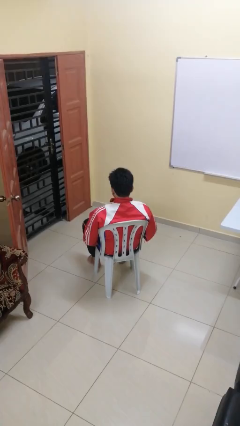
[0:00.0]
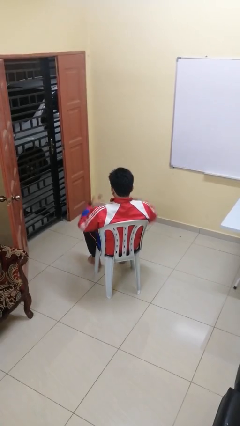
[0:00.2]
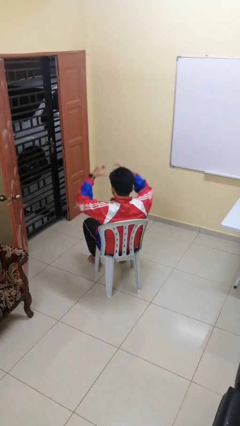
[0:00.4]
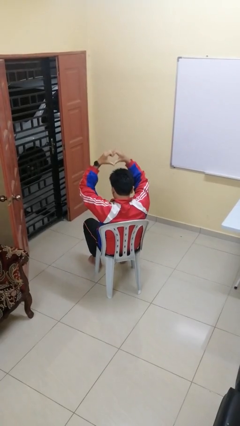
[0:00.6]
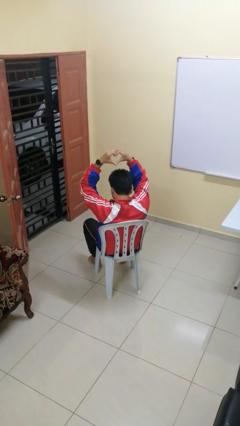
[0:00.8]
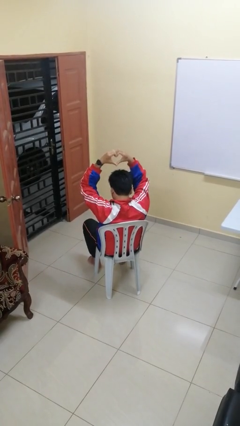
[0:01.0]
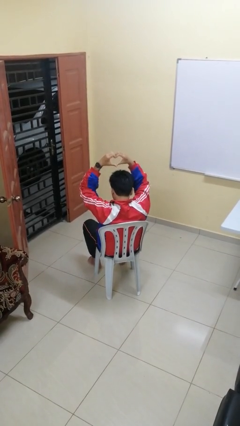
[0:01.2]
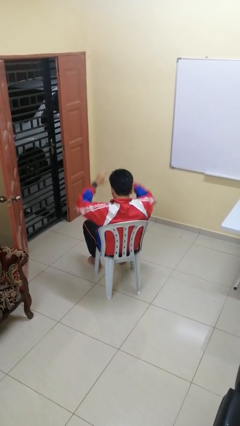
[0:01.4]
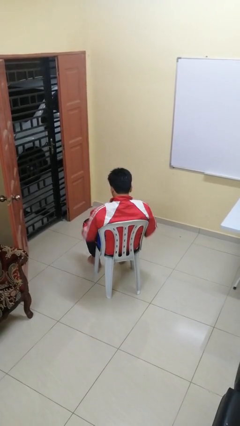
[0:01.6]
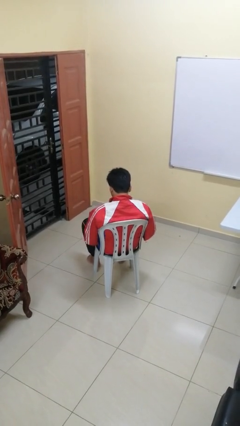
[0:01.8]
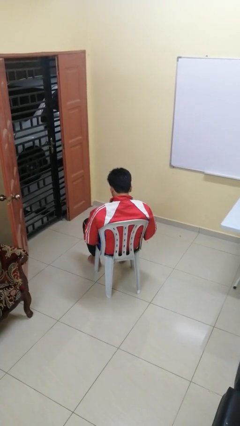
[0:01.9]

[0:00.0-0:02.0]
person gestures heart

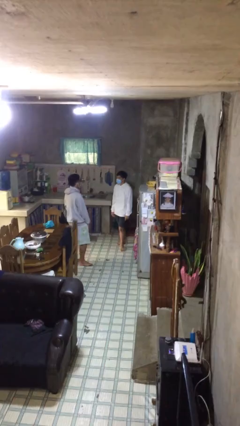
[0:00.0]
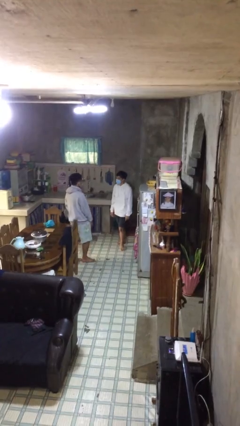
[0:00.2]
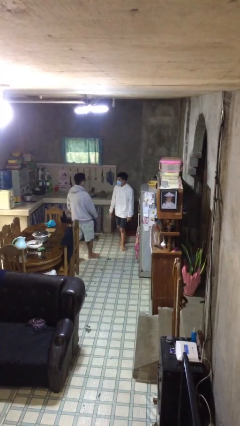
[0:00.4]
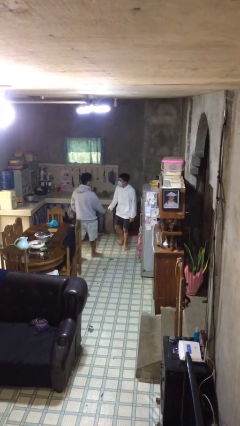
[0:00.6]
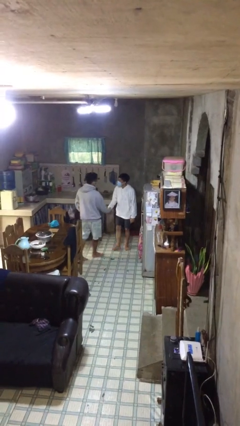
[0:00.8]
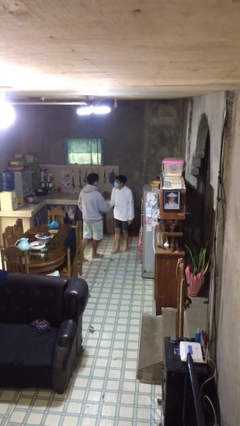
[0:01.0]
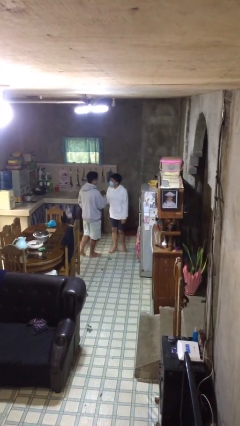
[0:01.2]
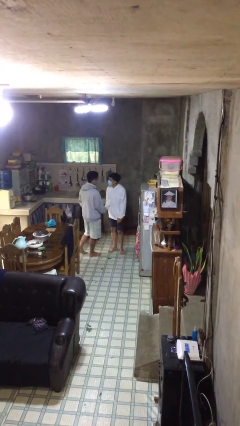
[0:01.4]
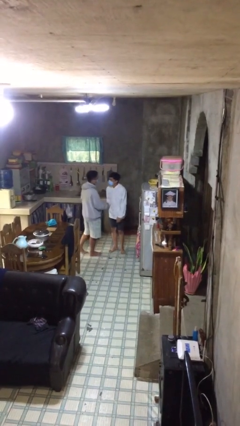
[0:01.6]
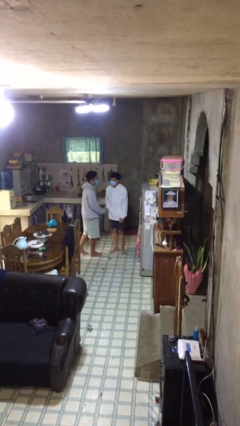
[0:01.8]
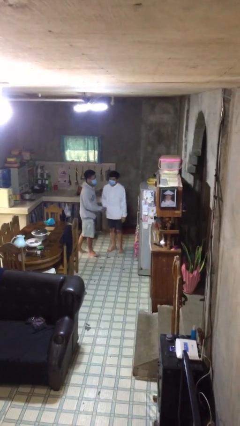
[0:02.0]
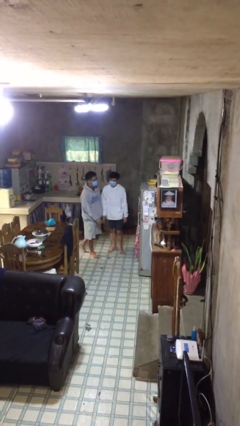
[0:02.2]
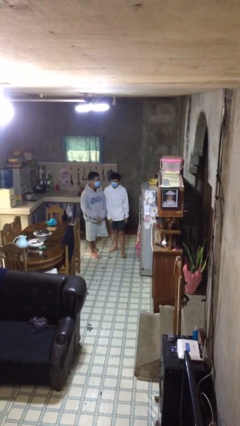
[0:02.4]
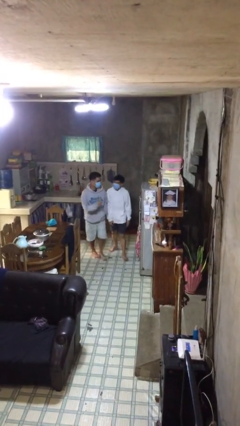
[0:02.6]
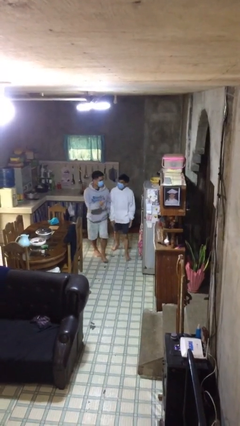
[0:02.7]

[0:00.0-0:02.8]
person shakes hand

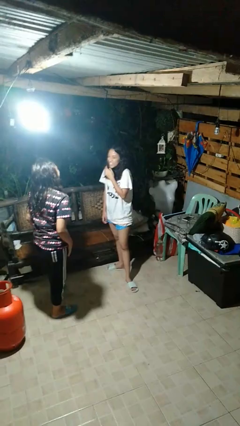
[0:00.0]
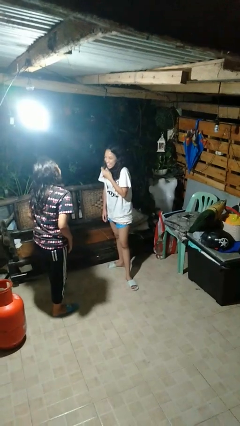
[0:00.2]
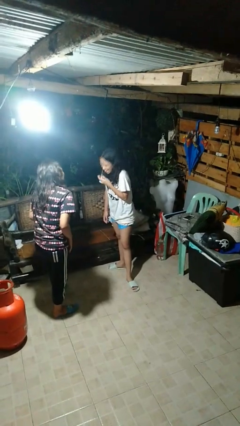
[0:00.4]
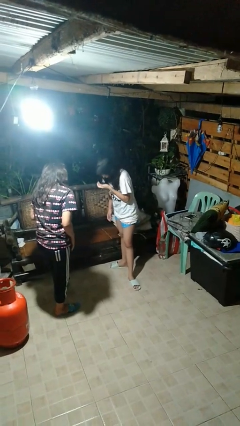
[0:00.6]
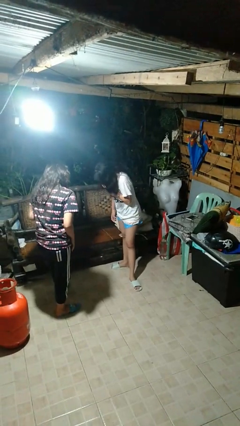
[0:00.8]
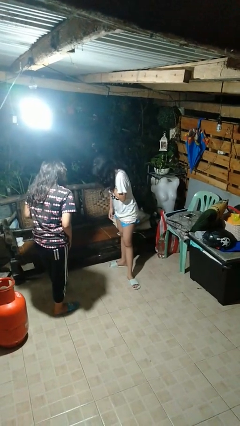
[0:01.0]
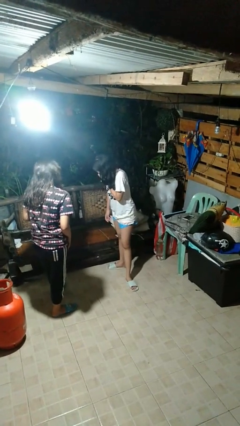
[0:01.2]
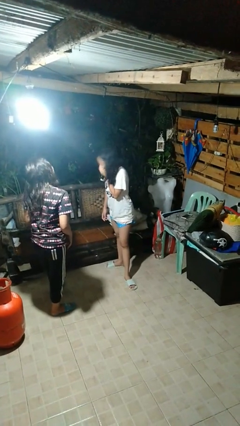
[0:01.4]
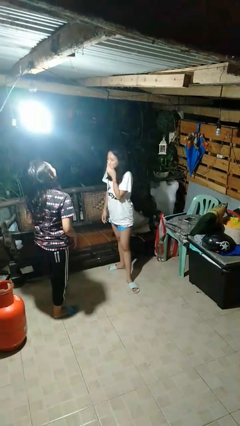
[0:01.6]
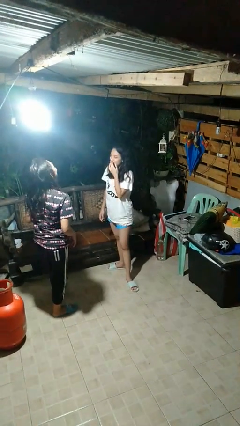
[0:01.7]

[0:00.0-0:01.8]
person laughs with person

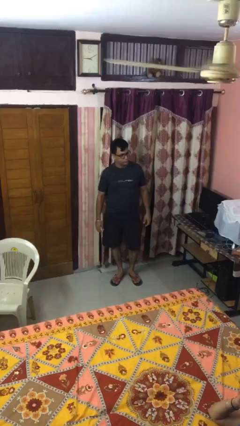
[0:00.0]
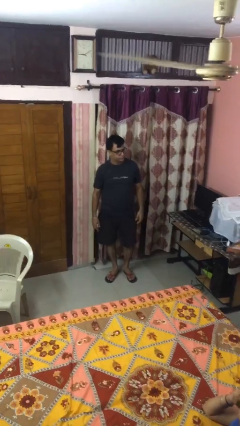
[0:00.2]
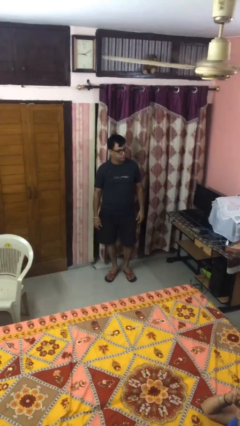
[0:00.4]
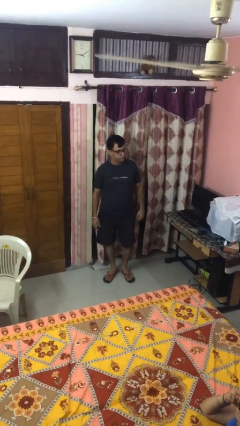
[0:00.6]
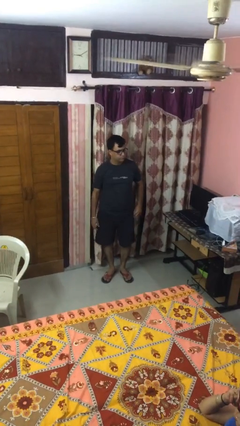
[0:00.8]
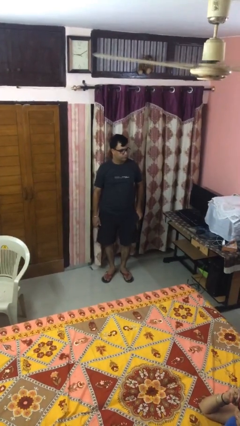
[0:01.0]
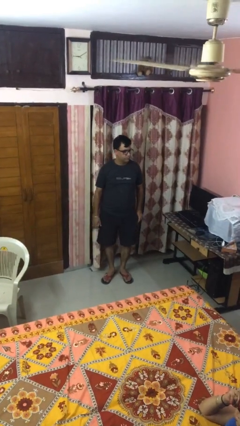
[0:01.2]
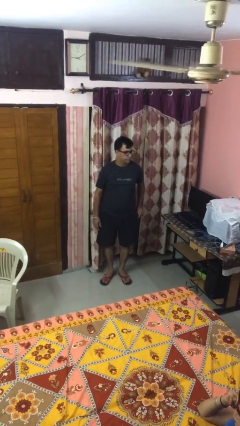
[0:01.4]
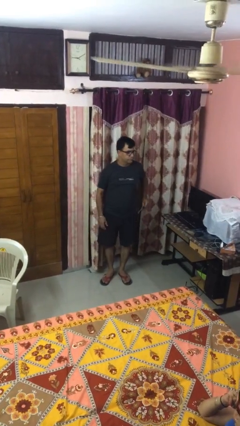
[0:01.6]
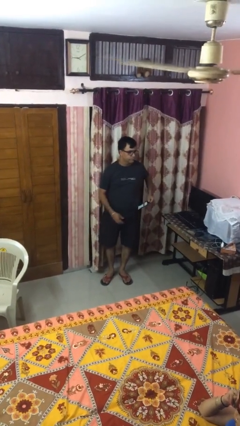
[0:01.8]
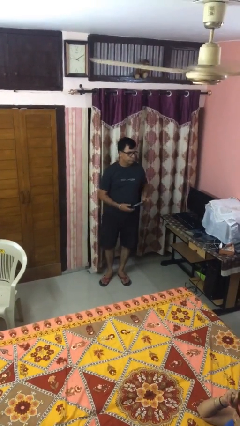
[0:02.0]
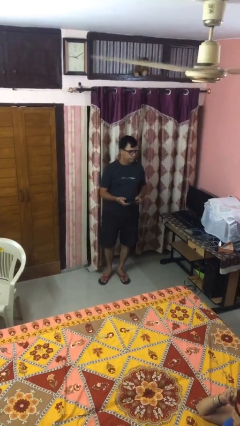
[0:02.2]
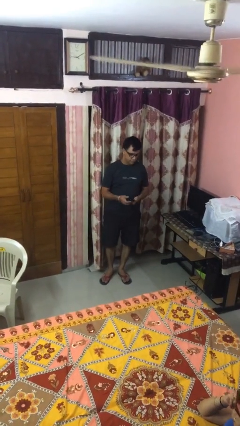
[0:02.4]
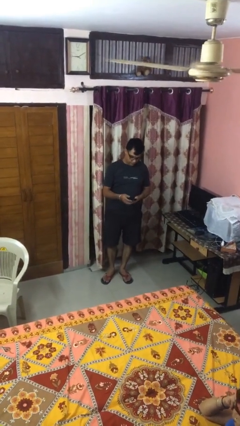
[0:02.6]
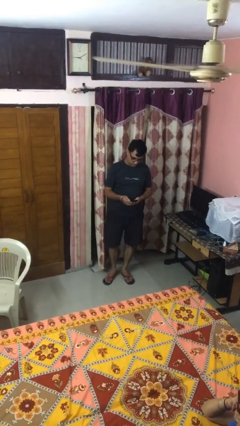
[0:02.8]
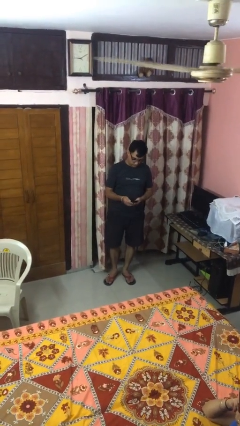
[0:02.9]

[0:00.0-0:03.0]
person takes phone from pocket

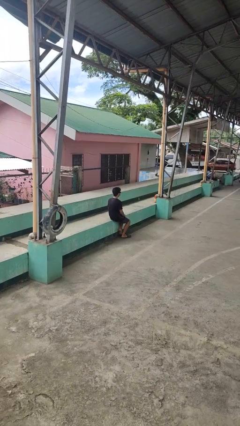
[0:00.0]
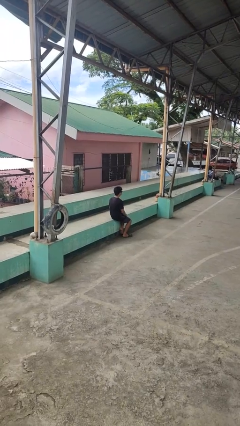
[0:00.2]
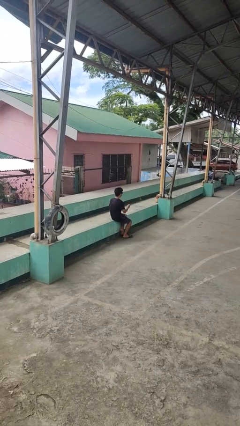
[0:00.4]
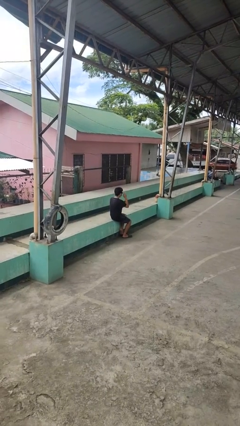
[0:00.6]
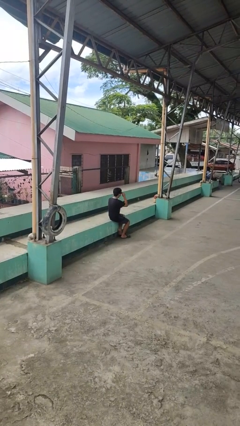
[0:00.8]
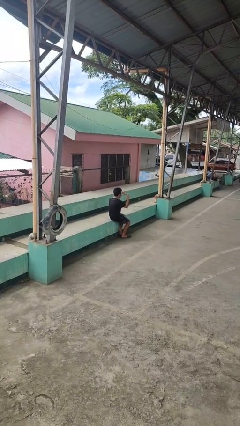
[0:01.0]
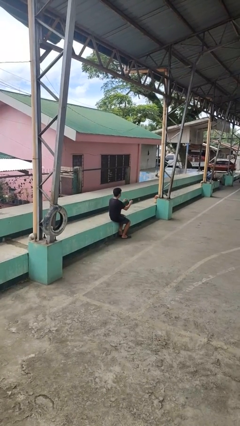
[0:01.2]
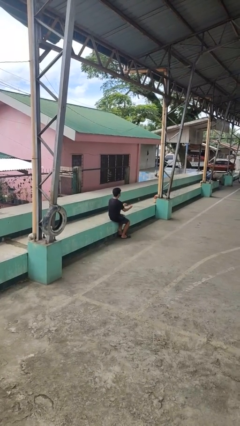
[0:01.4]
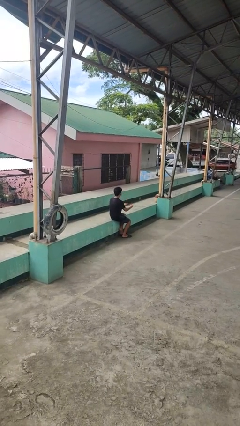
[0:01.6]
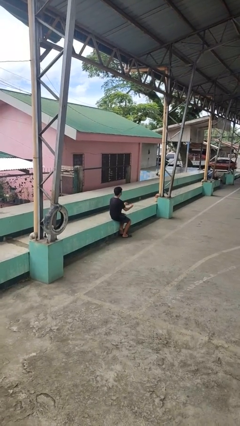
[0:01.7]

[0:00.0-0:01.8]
person takes off sunglasses

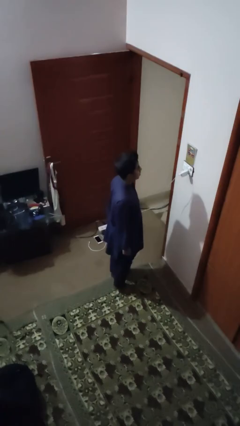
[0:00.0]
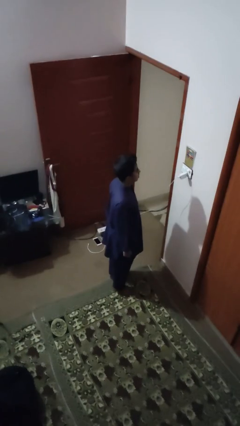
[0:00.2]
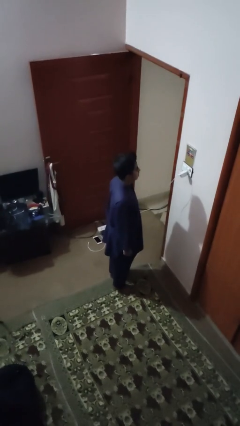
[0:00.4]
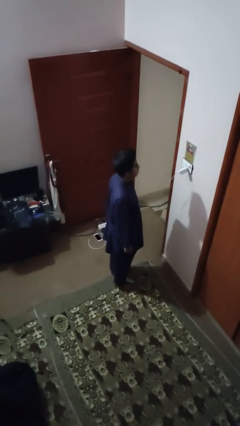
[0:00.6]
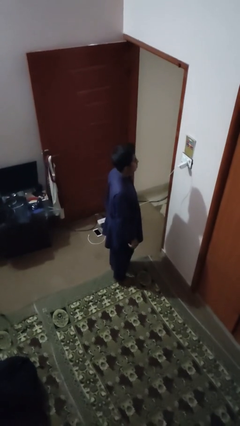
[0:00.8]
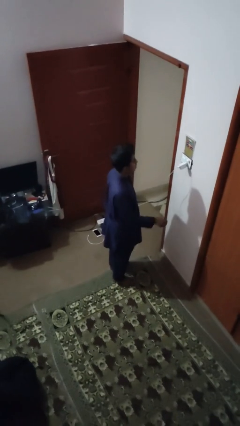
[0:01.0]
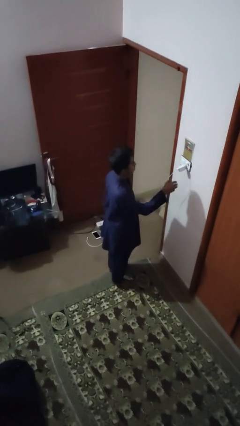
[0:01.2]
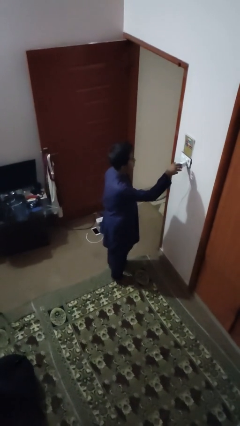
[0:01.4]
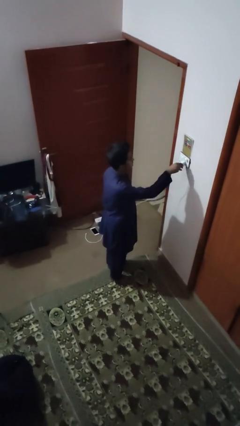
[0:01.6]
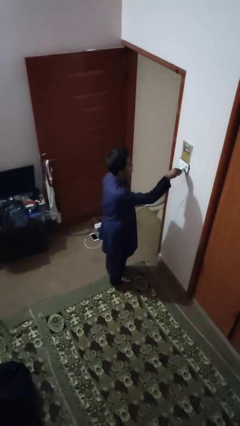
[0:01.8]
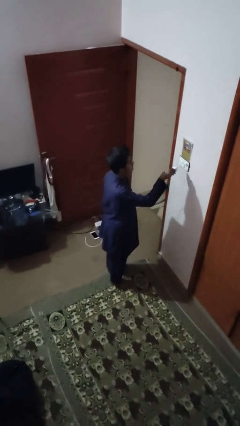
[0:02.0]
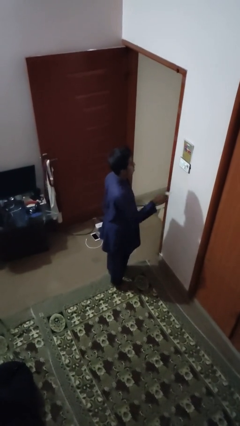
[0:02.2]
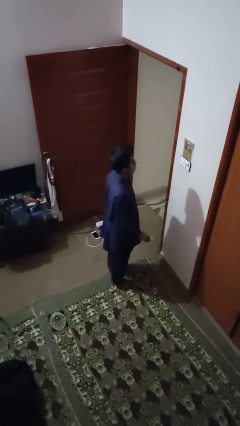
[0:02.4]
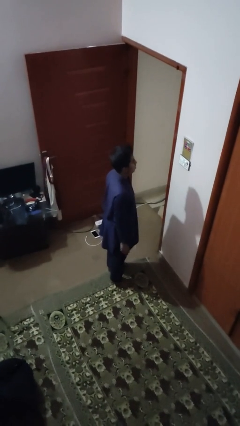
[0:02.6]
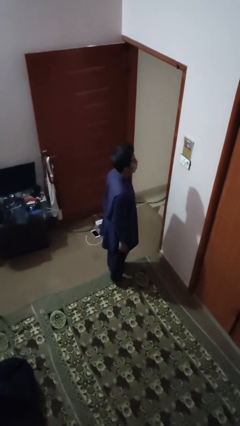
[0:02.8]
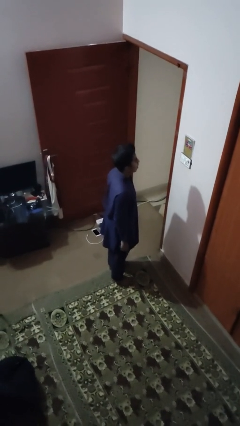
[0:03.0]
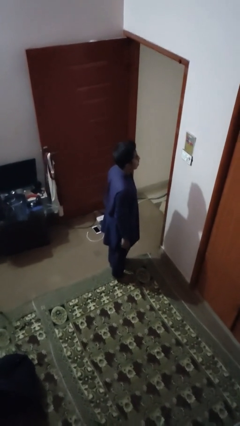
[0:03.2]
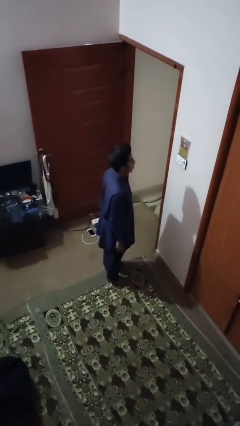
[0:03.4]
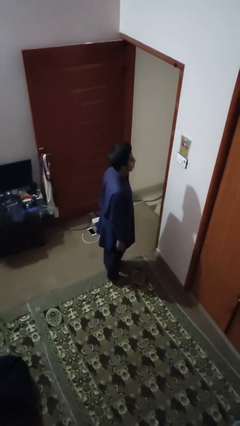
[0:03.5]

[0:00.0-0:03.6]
person unplugs from electrical socket

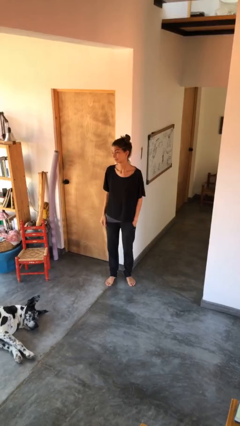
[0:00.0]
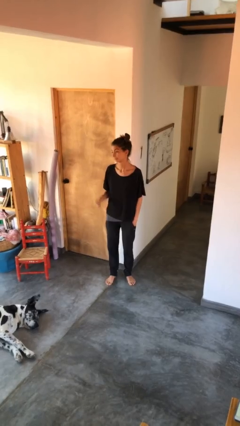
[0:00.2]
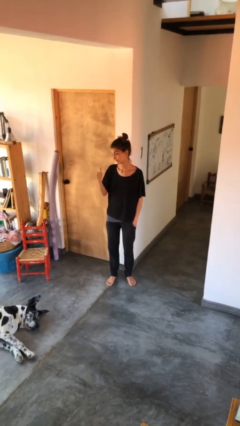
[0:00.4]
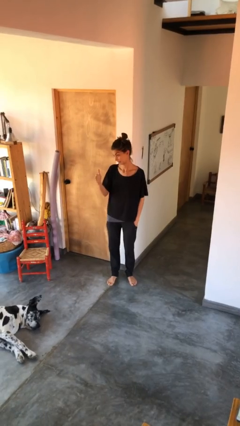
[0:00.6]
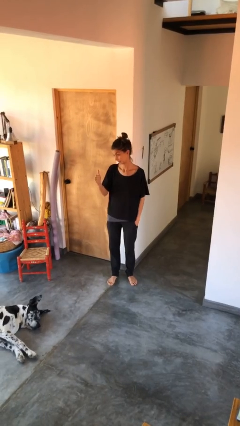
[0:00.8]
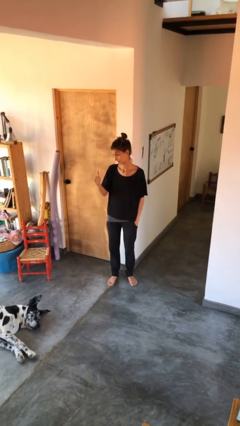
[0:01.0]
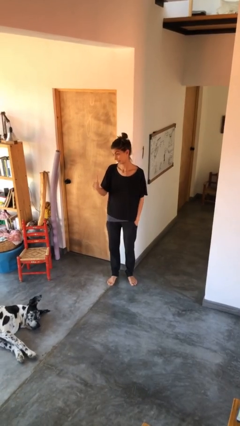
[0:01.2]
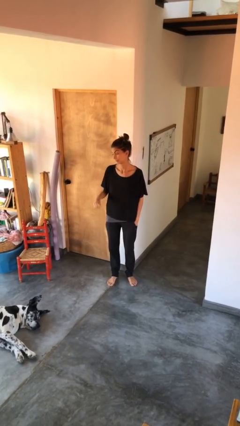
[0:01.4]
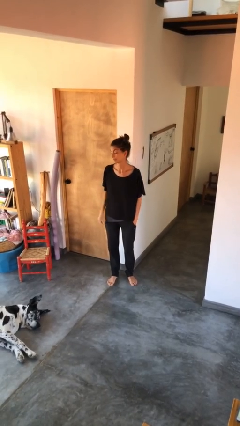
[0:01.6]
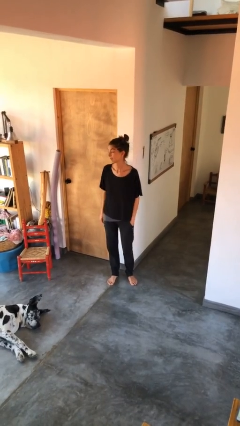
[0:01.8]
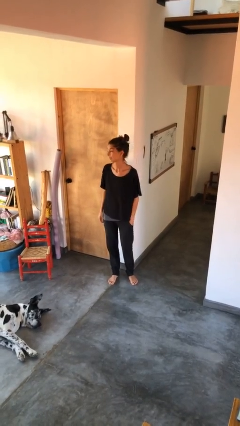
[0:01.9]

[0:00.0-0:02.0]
person gestures thumbs up
